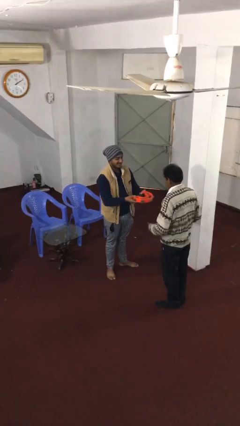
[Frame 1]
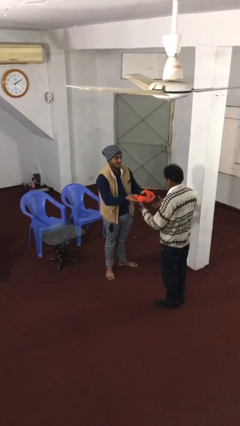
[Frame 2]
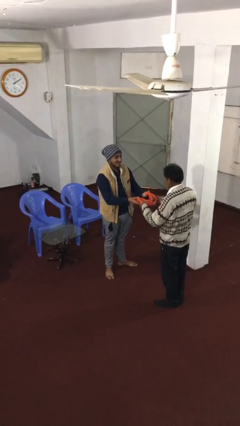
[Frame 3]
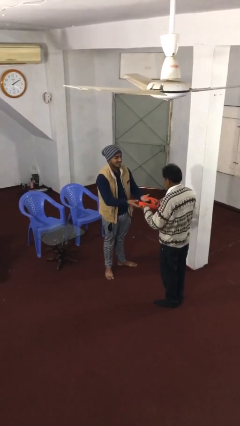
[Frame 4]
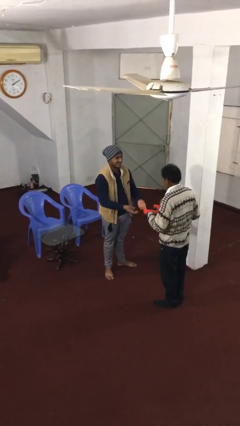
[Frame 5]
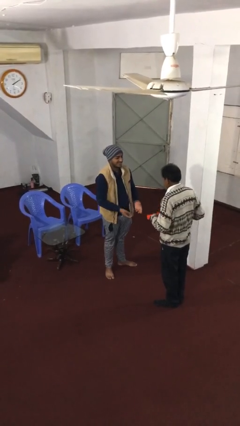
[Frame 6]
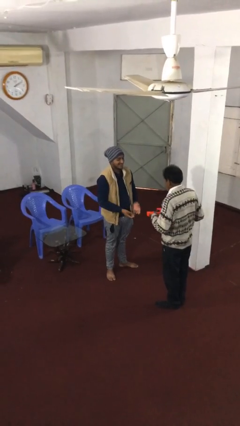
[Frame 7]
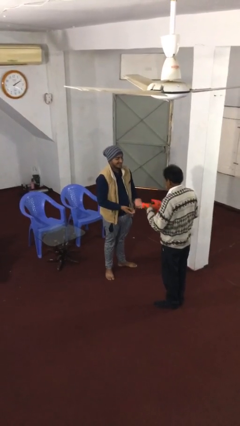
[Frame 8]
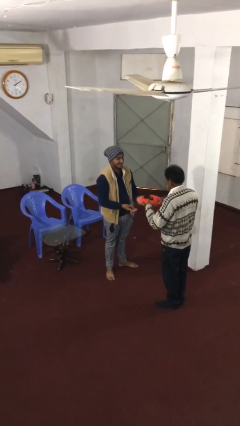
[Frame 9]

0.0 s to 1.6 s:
person transfers object to person

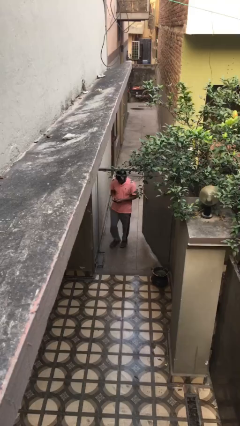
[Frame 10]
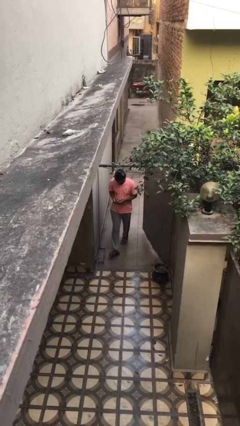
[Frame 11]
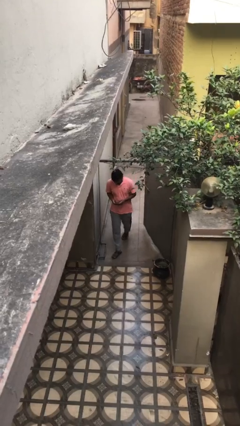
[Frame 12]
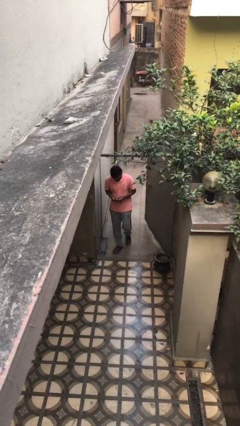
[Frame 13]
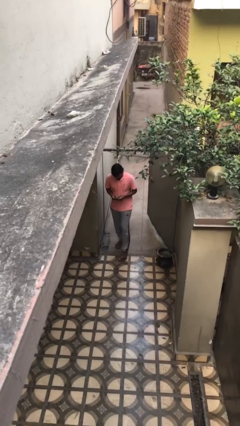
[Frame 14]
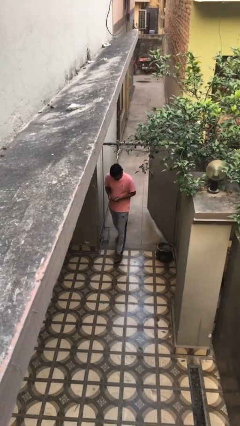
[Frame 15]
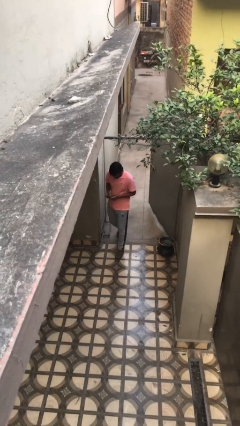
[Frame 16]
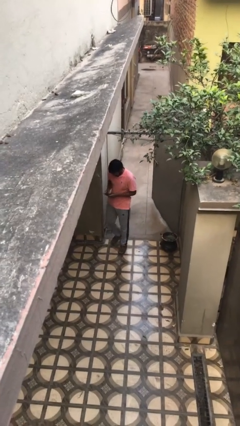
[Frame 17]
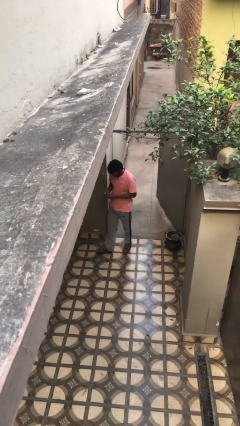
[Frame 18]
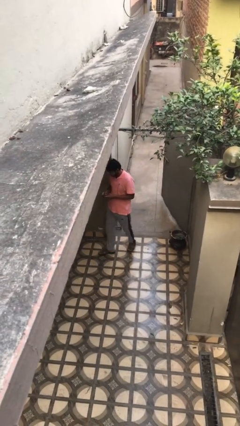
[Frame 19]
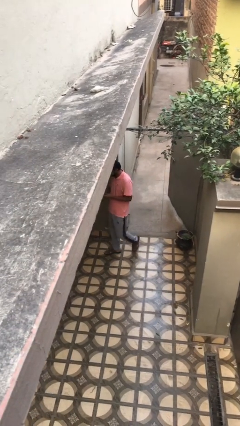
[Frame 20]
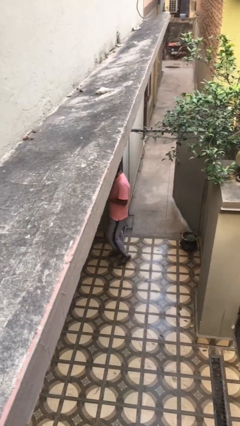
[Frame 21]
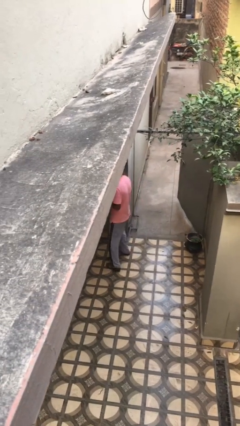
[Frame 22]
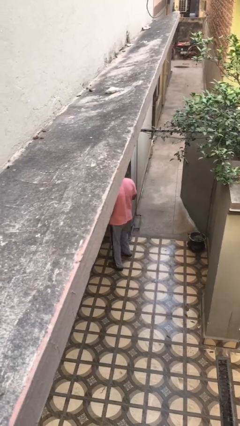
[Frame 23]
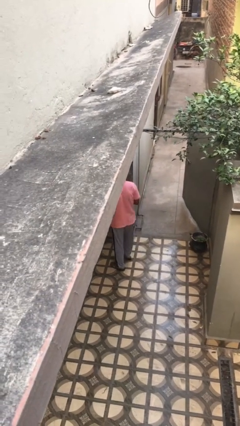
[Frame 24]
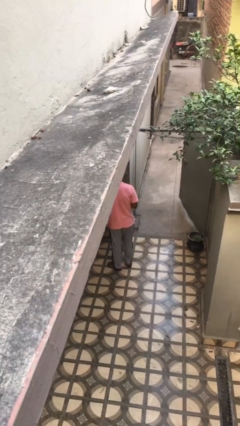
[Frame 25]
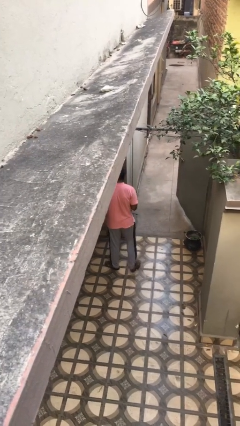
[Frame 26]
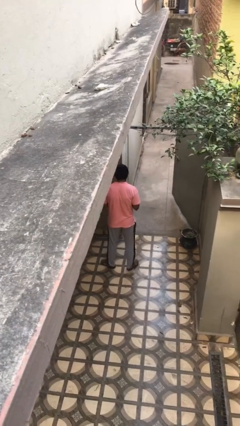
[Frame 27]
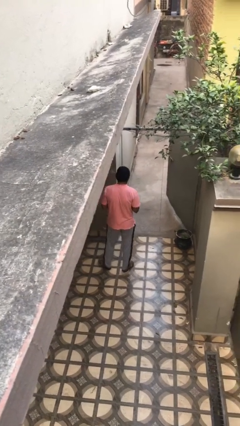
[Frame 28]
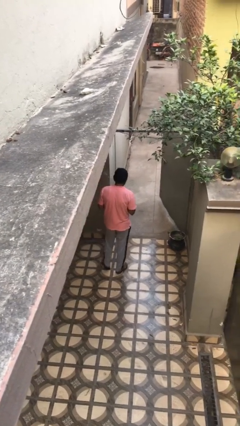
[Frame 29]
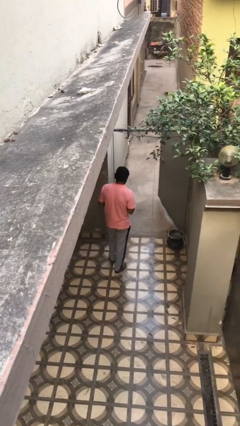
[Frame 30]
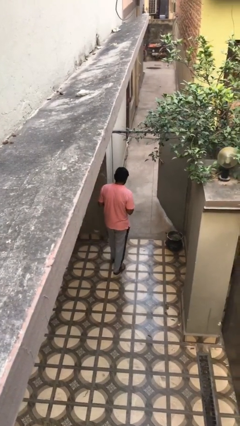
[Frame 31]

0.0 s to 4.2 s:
person enters scene through structure

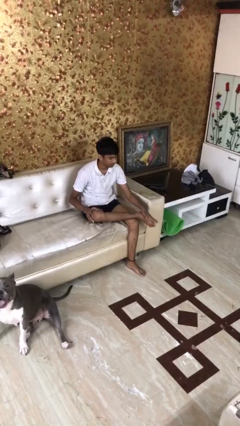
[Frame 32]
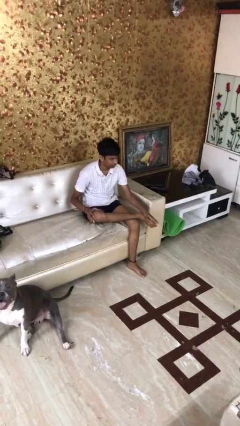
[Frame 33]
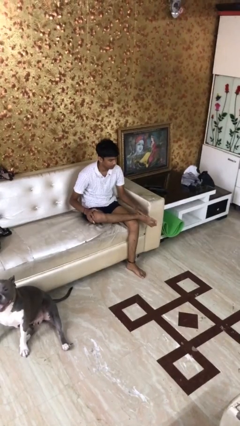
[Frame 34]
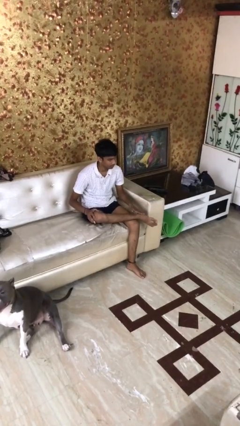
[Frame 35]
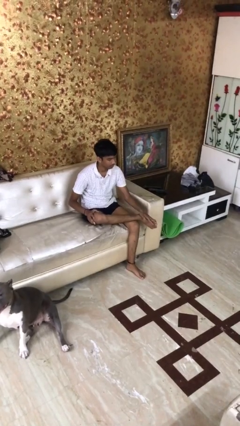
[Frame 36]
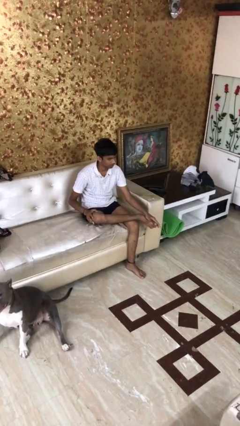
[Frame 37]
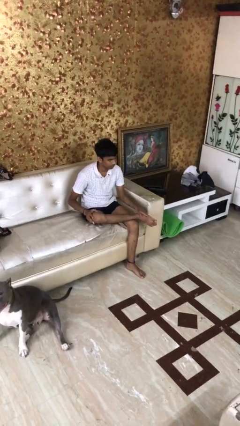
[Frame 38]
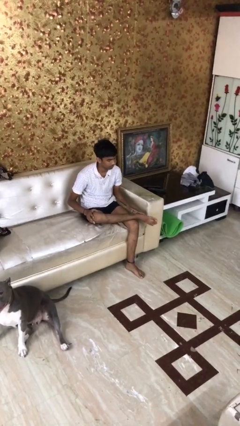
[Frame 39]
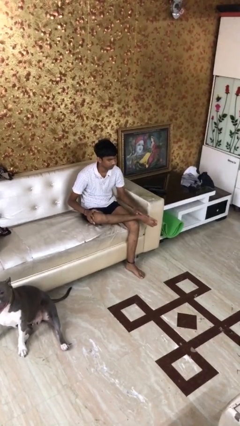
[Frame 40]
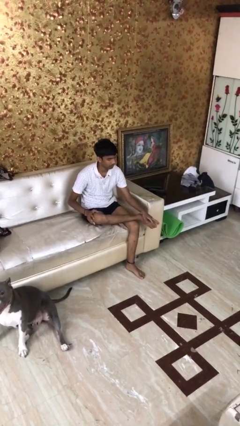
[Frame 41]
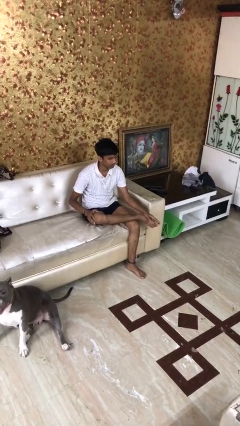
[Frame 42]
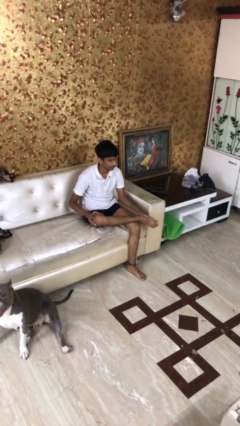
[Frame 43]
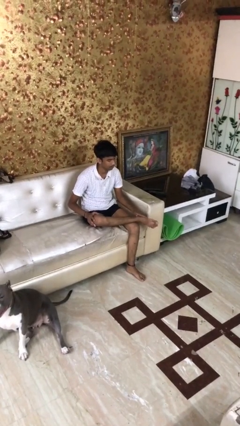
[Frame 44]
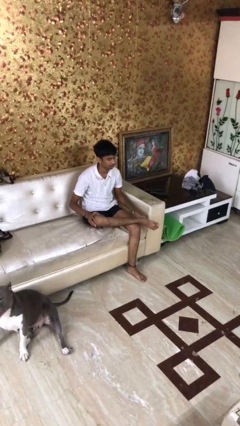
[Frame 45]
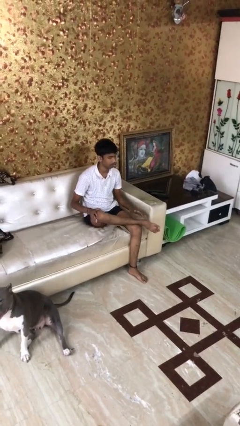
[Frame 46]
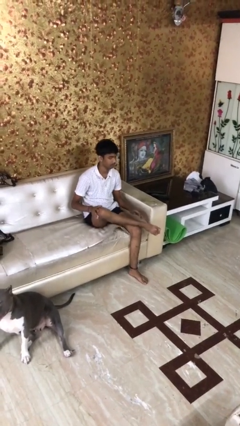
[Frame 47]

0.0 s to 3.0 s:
person rubs foot

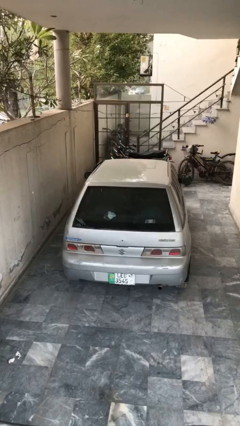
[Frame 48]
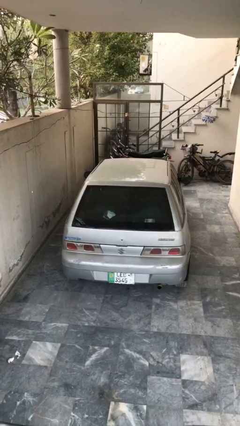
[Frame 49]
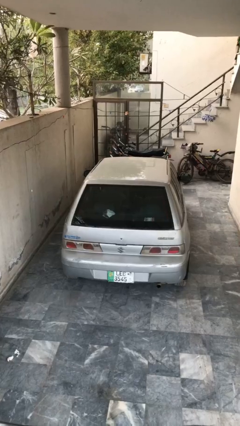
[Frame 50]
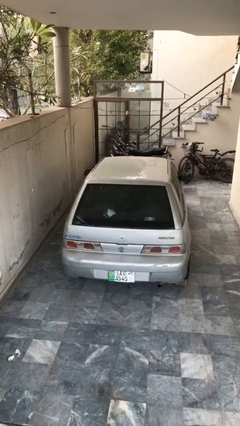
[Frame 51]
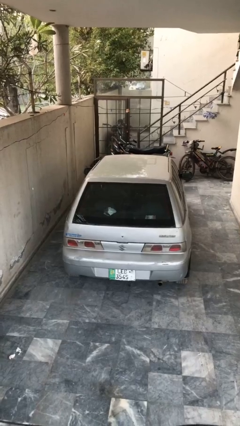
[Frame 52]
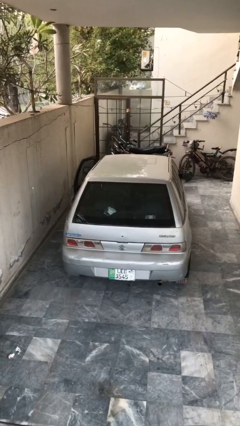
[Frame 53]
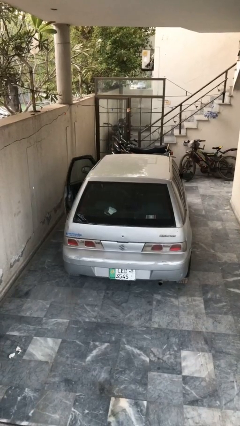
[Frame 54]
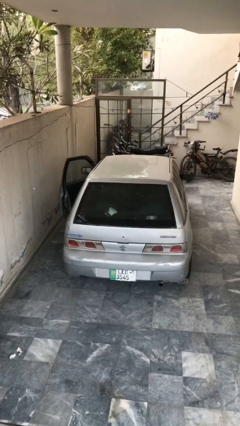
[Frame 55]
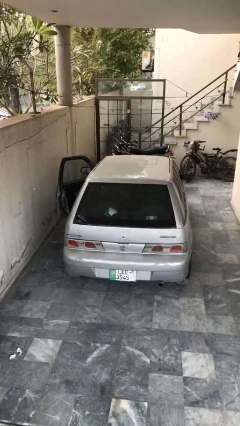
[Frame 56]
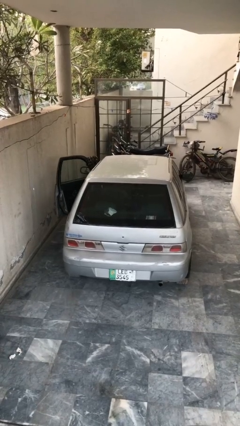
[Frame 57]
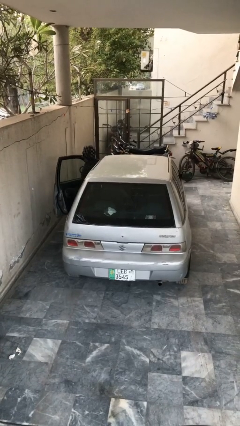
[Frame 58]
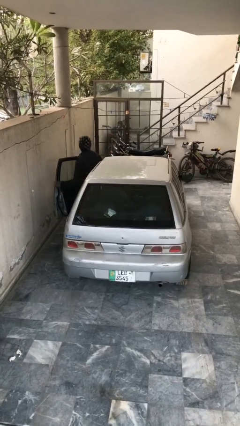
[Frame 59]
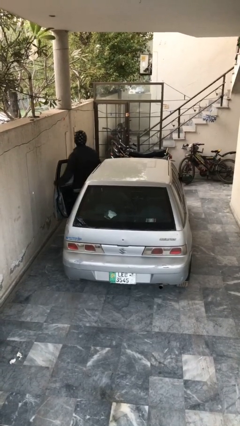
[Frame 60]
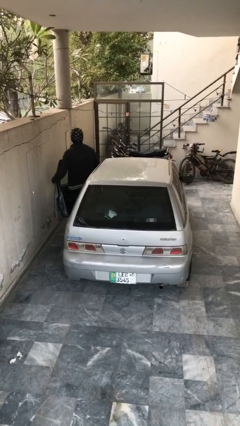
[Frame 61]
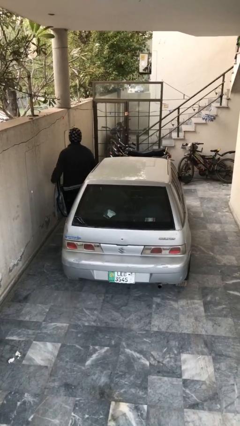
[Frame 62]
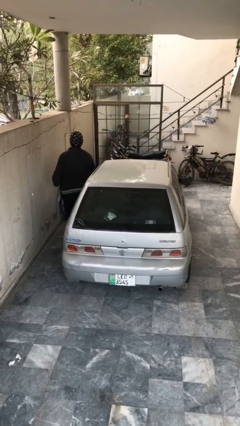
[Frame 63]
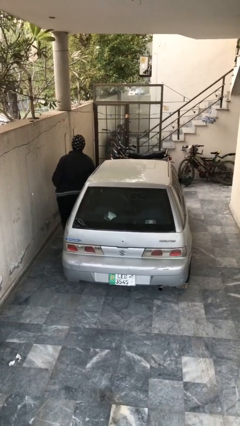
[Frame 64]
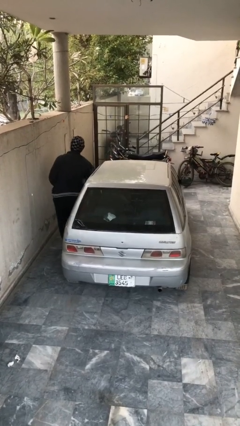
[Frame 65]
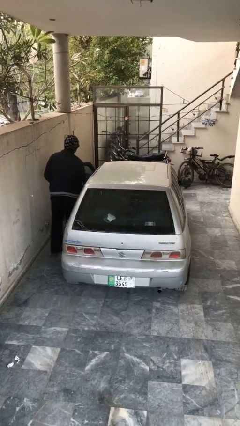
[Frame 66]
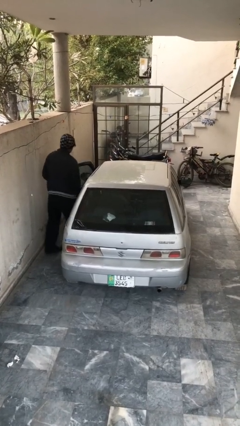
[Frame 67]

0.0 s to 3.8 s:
car drops off person

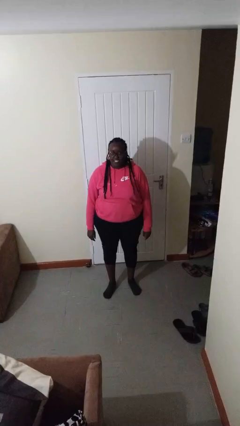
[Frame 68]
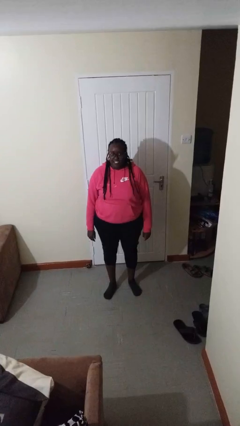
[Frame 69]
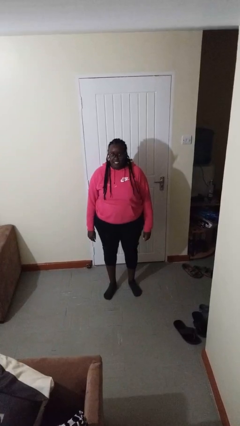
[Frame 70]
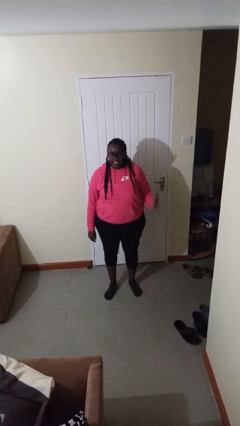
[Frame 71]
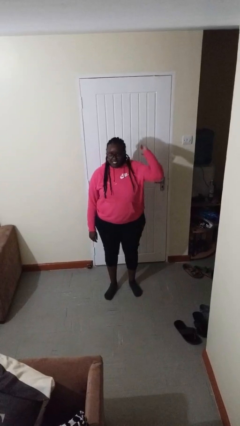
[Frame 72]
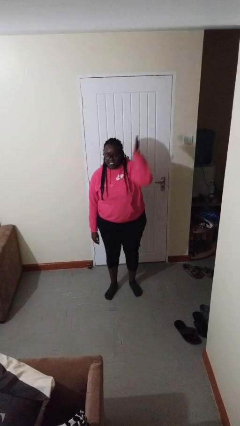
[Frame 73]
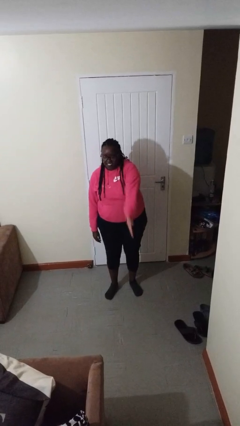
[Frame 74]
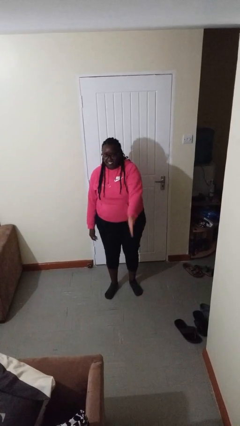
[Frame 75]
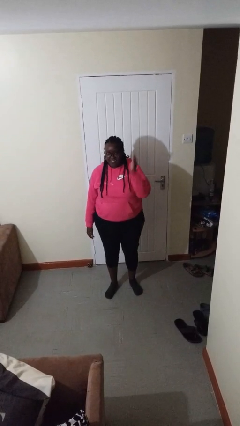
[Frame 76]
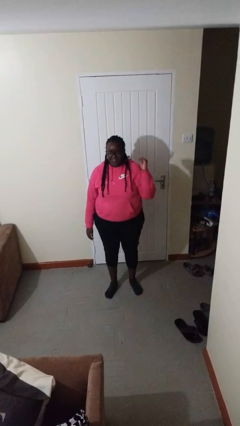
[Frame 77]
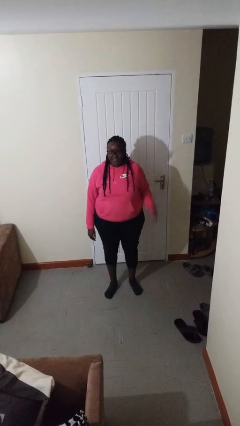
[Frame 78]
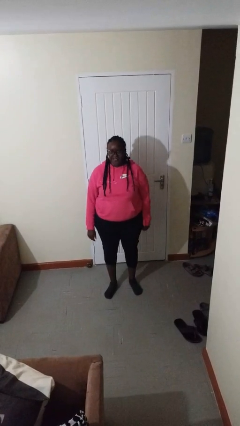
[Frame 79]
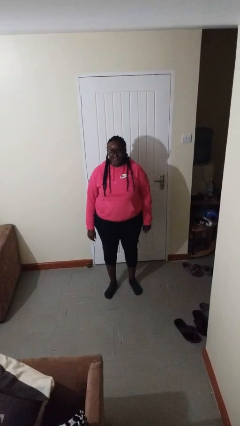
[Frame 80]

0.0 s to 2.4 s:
person karate chop

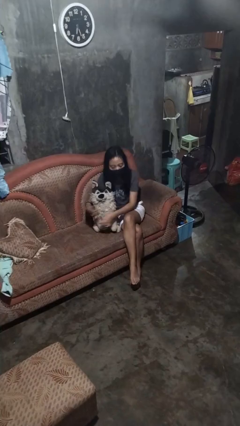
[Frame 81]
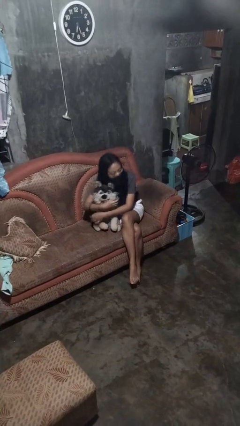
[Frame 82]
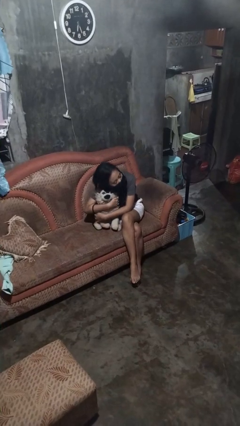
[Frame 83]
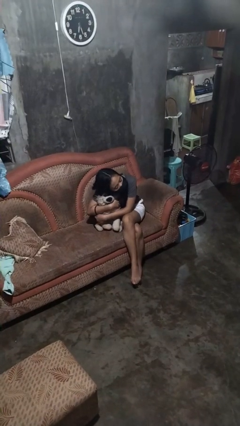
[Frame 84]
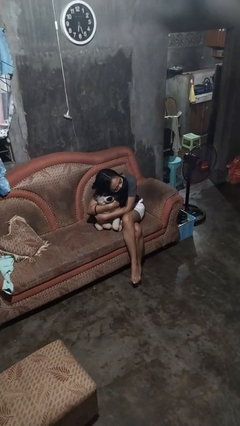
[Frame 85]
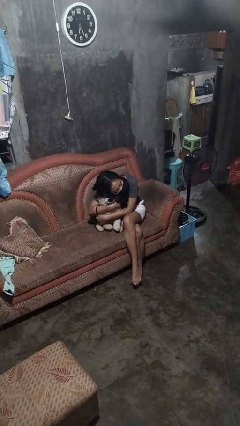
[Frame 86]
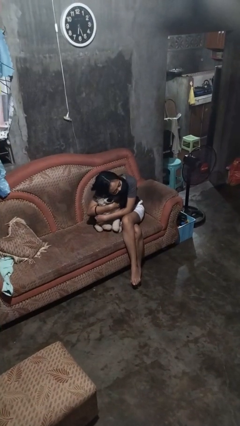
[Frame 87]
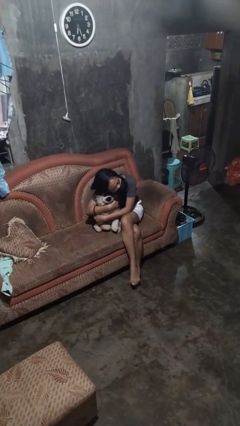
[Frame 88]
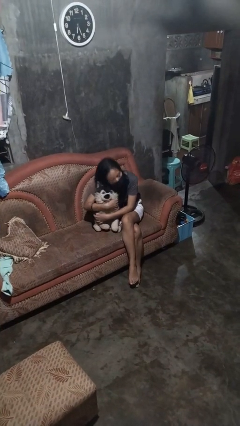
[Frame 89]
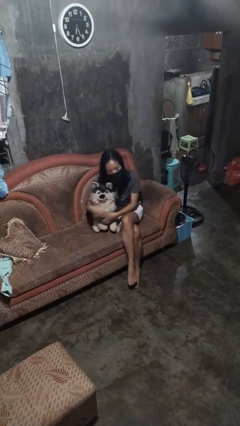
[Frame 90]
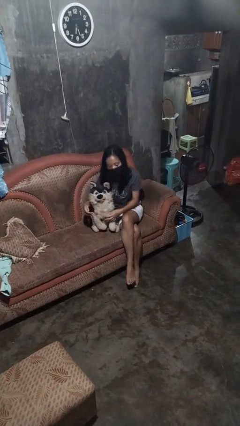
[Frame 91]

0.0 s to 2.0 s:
person hugs stuffed animal

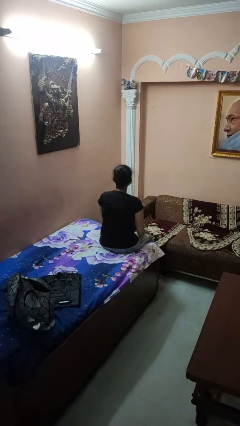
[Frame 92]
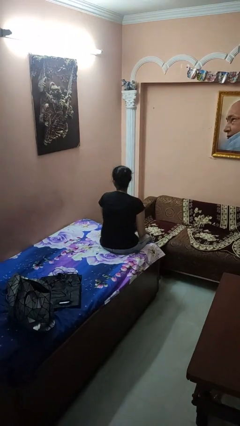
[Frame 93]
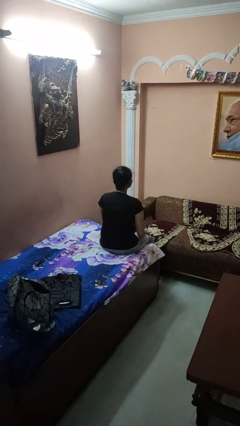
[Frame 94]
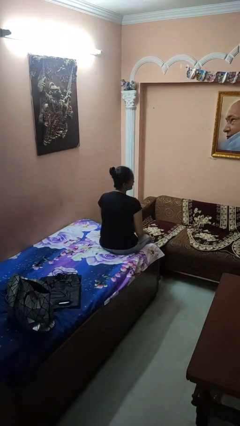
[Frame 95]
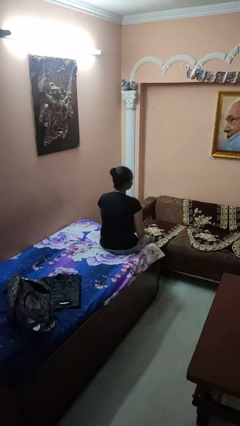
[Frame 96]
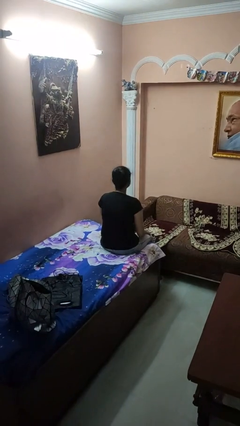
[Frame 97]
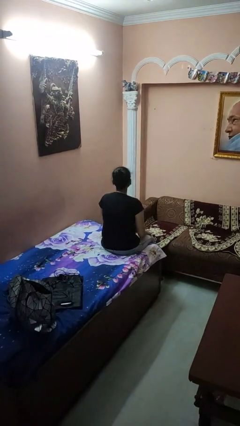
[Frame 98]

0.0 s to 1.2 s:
person shakes head
